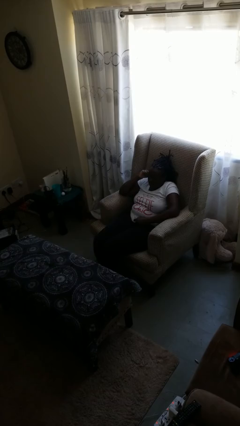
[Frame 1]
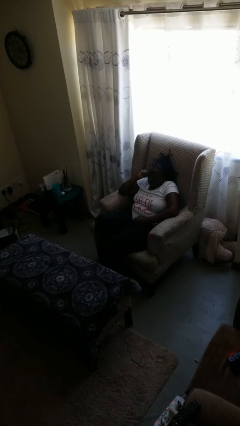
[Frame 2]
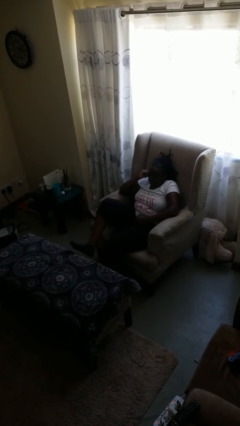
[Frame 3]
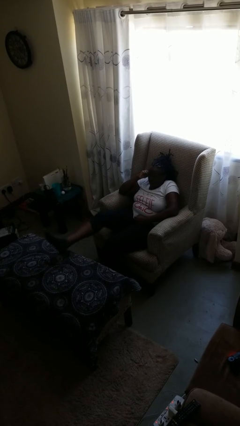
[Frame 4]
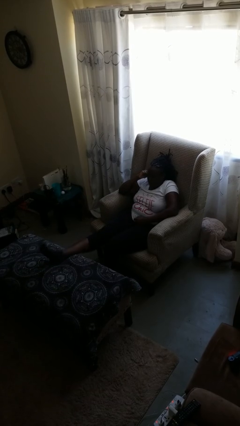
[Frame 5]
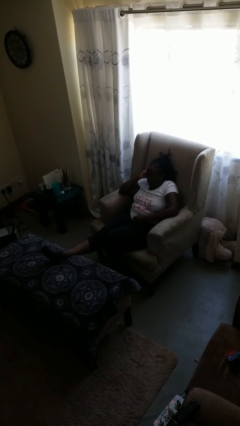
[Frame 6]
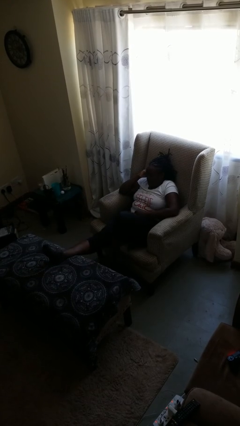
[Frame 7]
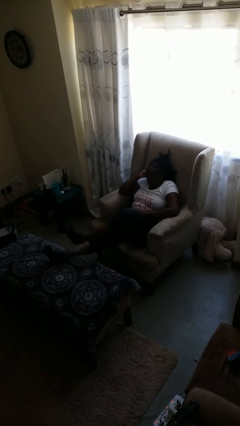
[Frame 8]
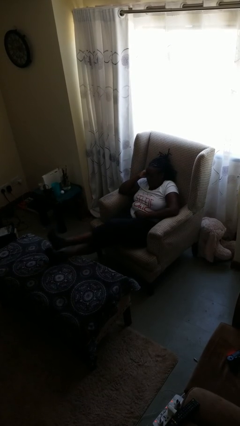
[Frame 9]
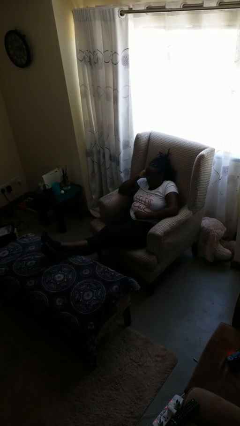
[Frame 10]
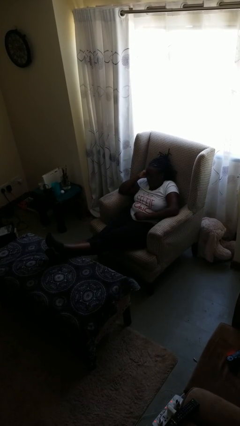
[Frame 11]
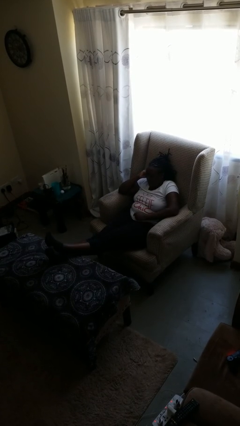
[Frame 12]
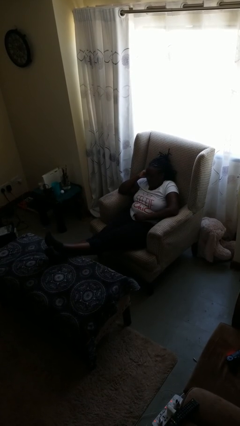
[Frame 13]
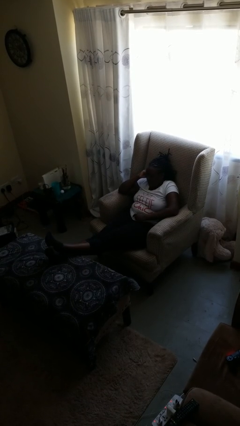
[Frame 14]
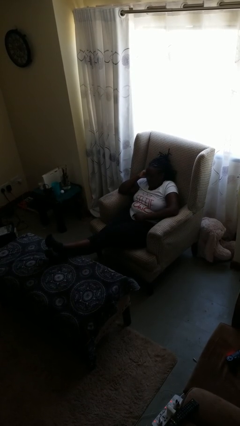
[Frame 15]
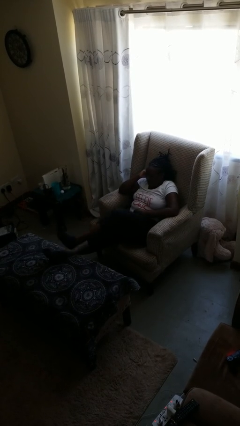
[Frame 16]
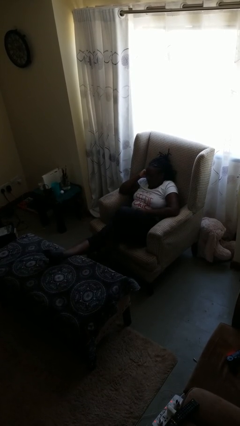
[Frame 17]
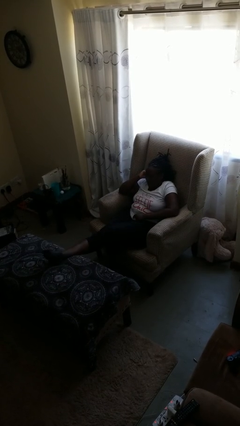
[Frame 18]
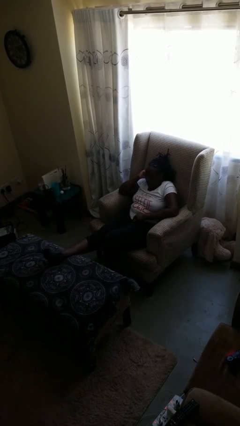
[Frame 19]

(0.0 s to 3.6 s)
person puts feet up

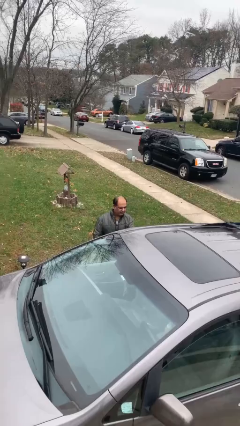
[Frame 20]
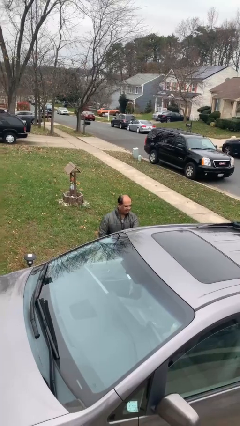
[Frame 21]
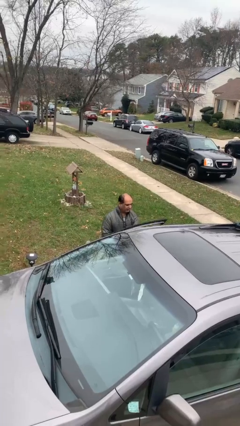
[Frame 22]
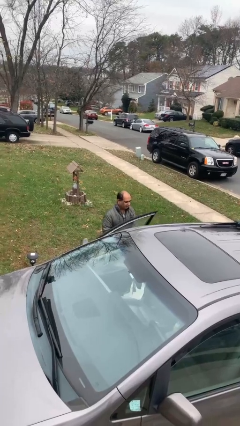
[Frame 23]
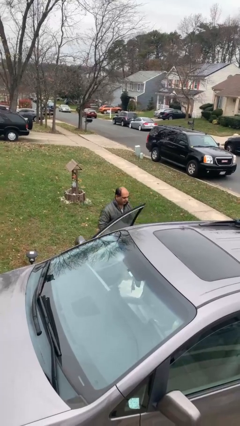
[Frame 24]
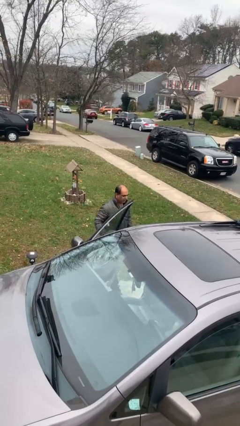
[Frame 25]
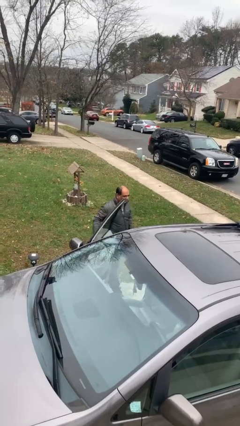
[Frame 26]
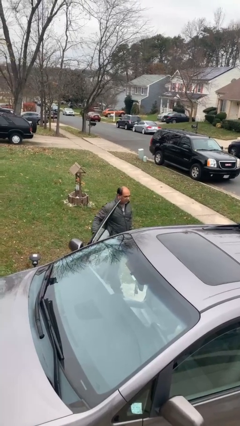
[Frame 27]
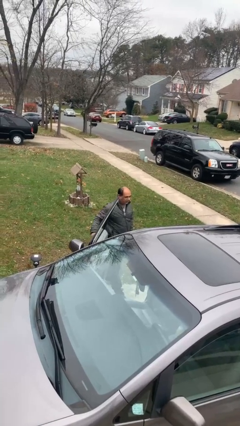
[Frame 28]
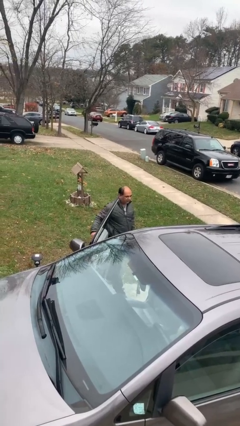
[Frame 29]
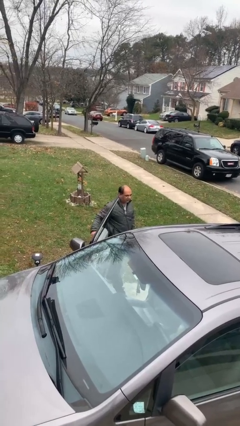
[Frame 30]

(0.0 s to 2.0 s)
person opens car door

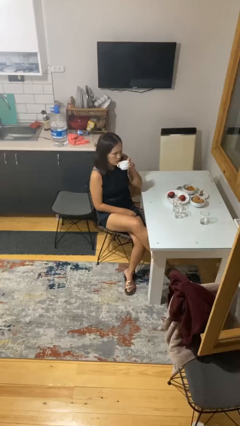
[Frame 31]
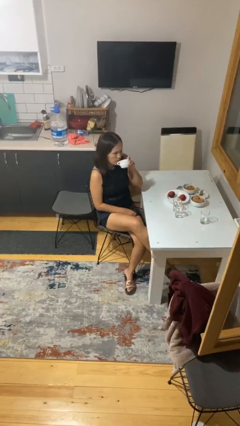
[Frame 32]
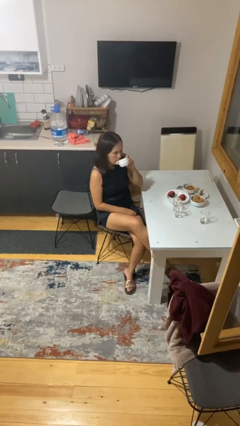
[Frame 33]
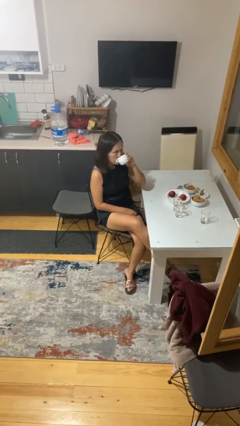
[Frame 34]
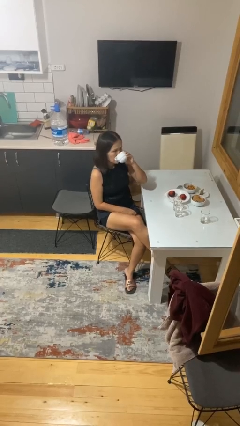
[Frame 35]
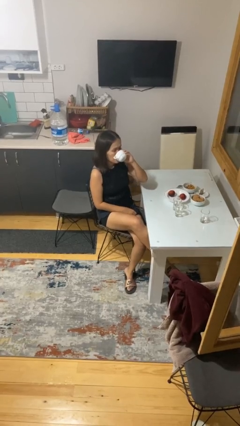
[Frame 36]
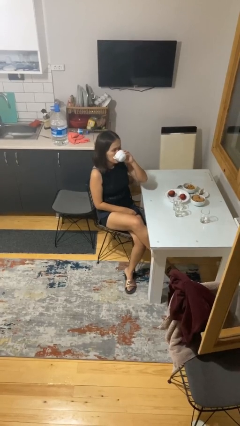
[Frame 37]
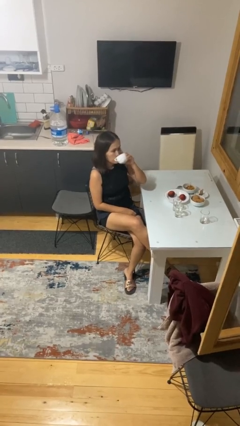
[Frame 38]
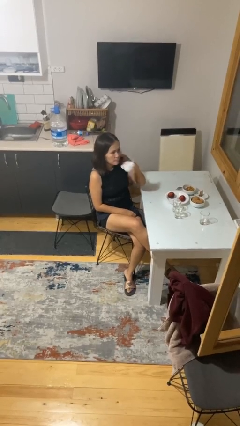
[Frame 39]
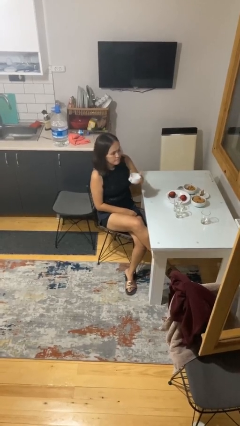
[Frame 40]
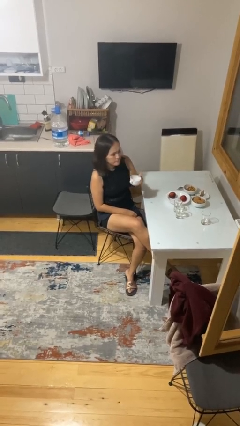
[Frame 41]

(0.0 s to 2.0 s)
person drinks from mug

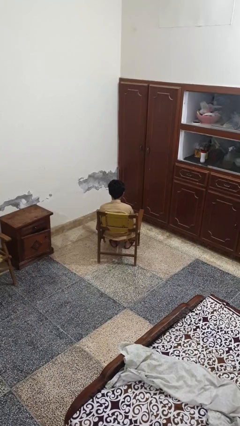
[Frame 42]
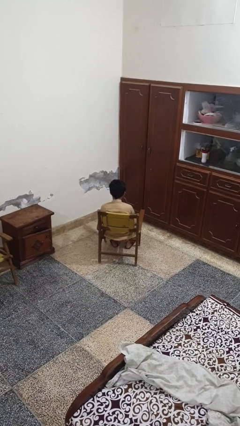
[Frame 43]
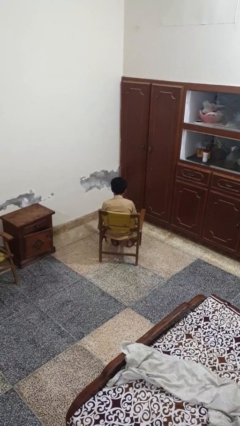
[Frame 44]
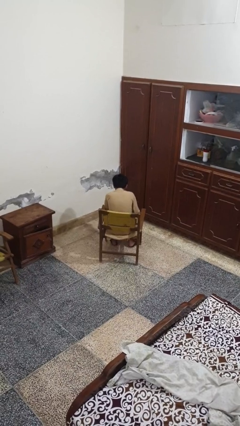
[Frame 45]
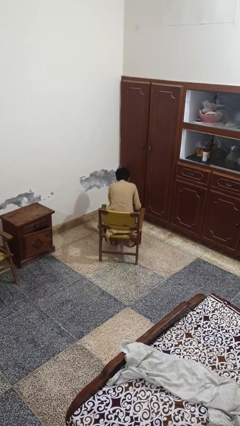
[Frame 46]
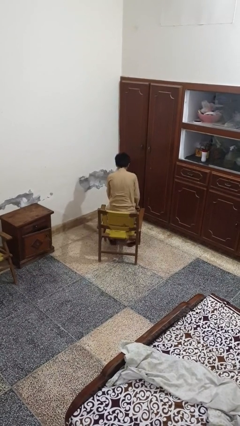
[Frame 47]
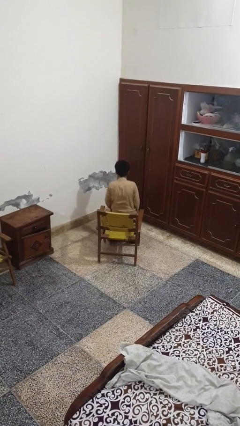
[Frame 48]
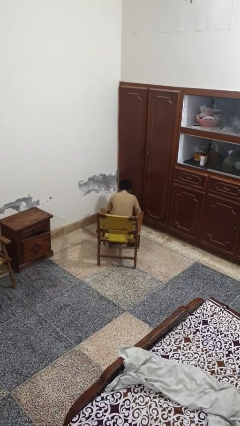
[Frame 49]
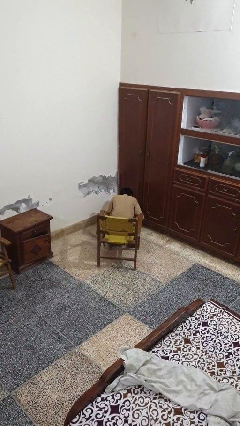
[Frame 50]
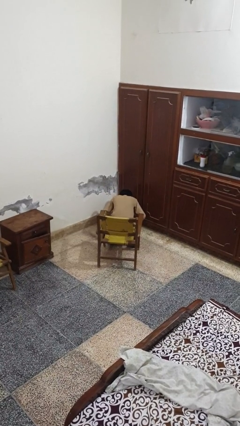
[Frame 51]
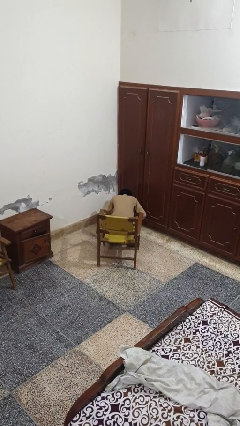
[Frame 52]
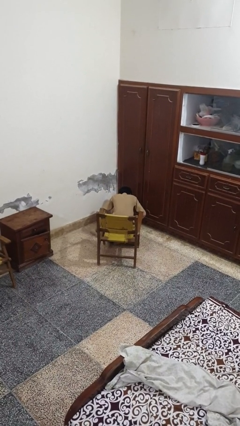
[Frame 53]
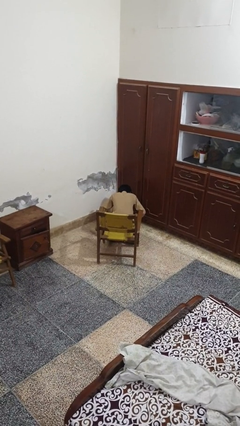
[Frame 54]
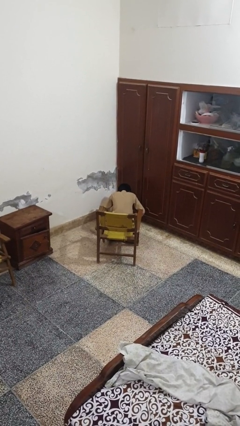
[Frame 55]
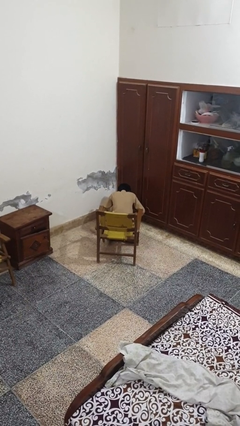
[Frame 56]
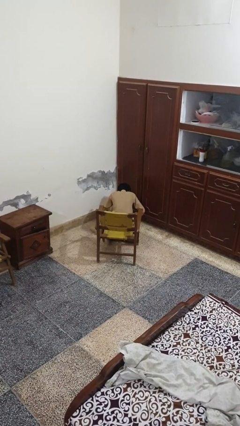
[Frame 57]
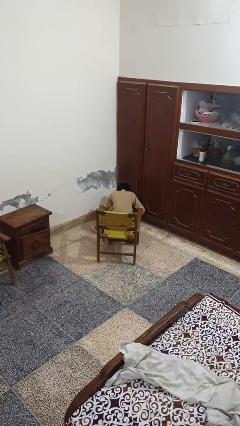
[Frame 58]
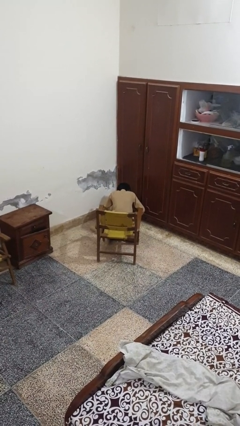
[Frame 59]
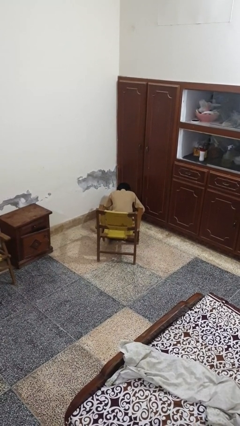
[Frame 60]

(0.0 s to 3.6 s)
person falls from chair

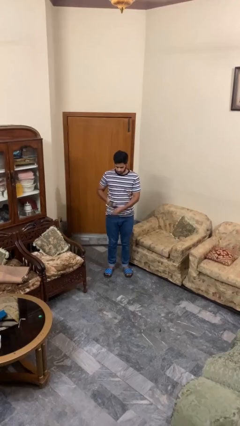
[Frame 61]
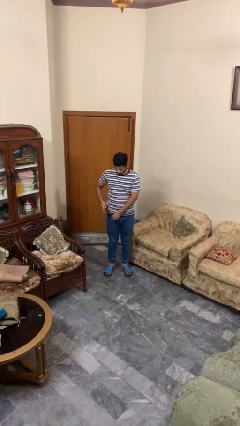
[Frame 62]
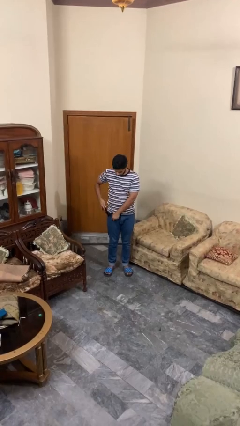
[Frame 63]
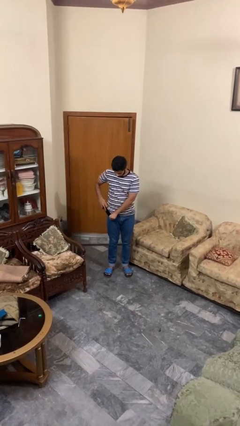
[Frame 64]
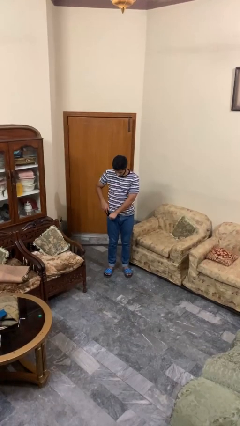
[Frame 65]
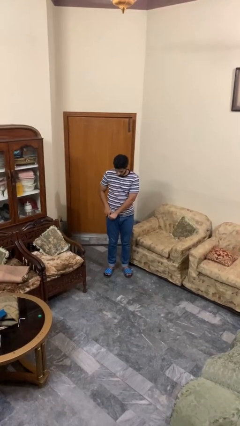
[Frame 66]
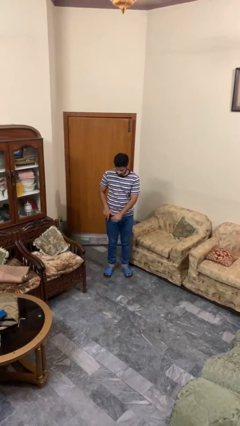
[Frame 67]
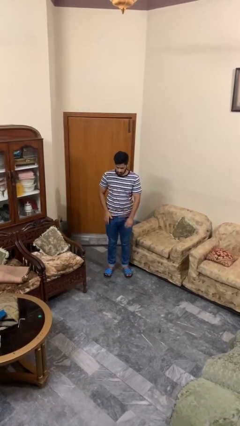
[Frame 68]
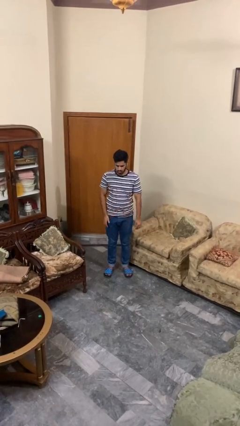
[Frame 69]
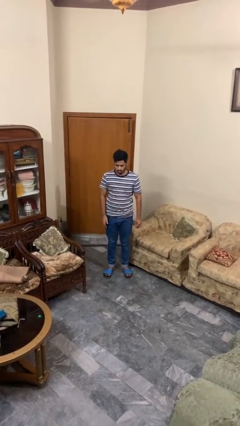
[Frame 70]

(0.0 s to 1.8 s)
person puts phone into pocket

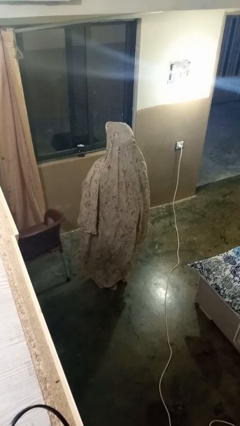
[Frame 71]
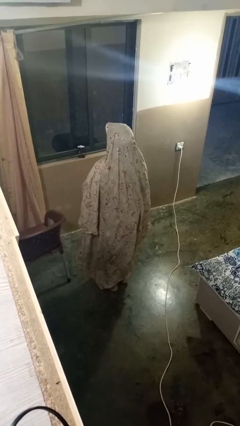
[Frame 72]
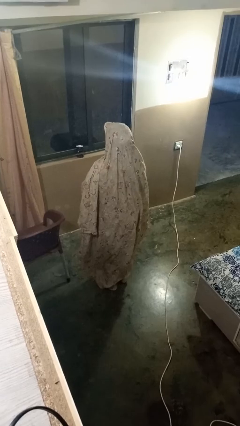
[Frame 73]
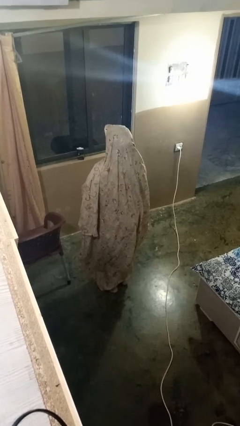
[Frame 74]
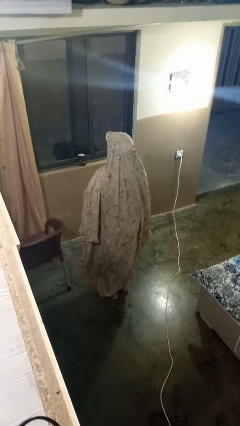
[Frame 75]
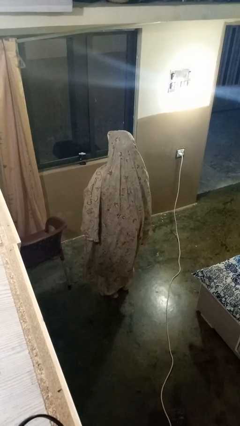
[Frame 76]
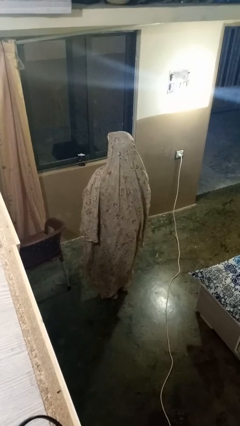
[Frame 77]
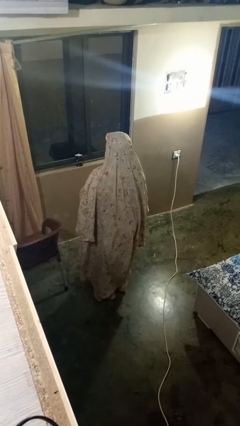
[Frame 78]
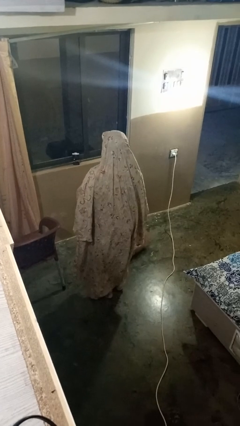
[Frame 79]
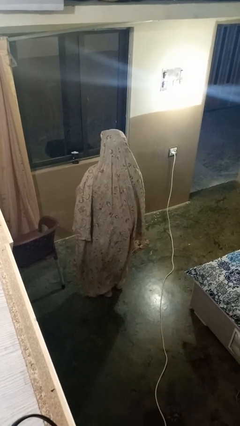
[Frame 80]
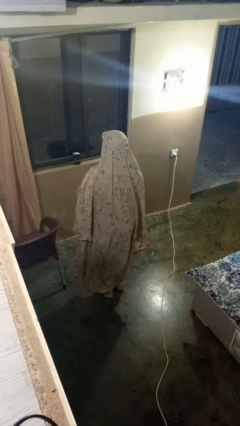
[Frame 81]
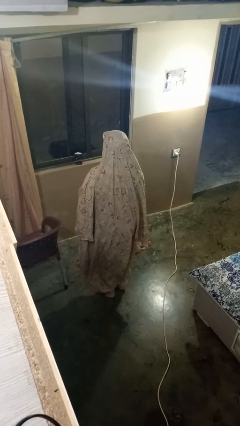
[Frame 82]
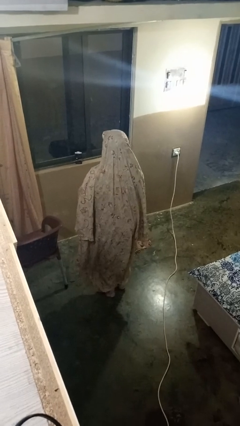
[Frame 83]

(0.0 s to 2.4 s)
person drops object

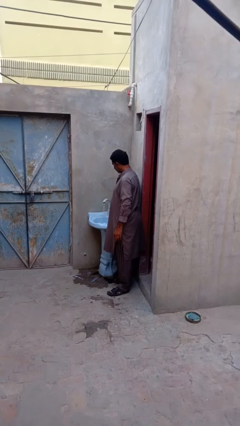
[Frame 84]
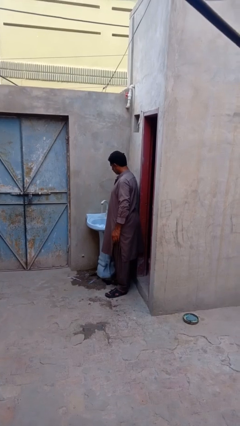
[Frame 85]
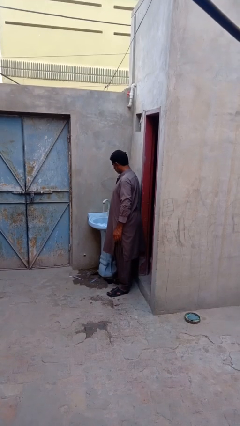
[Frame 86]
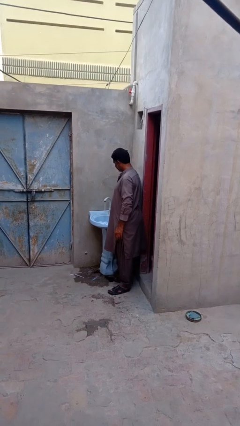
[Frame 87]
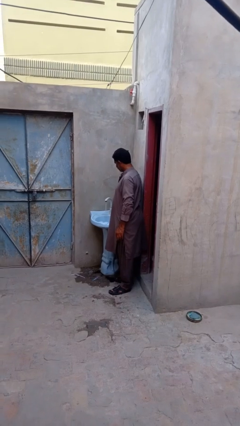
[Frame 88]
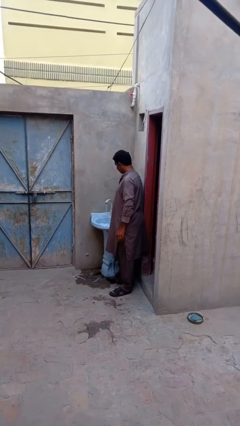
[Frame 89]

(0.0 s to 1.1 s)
person turns on faucet

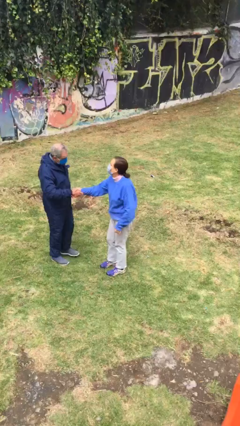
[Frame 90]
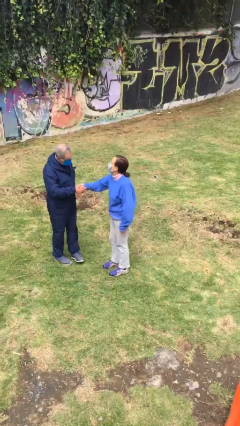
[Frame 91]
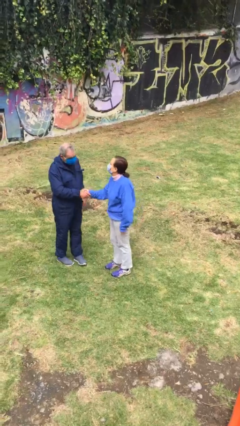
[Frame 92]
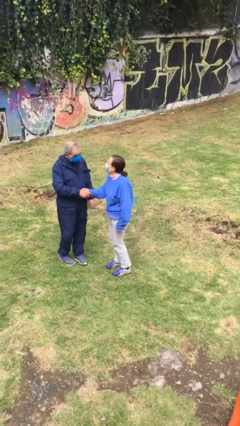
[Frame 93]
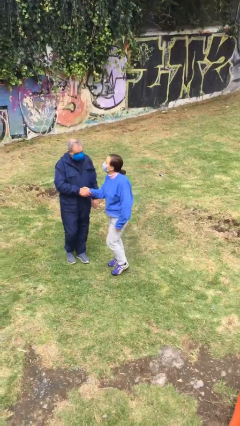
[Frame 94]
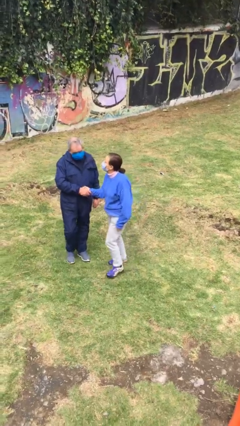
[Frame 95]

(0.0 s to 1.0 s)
person shakes hand
